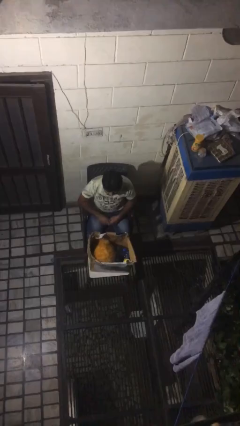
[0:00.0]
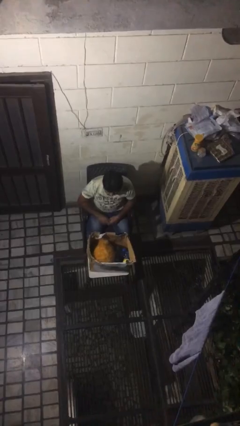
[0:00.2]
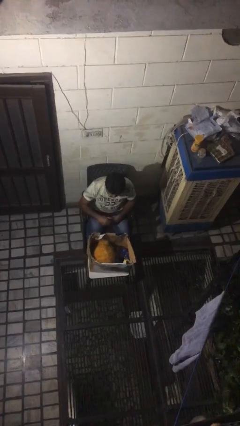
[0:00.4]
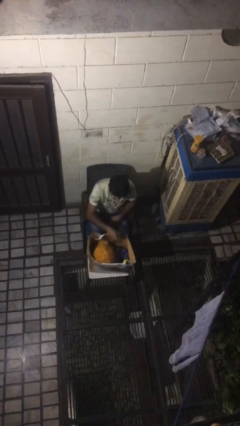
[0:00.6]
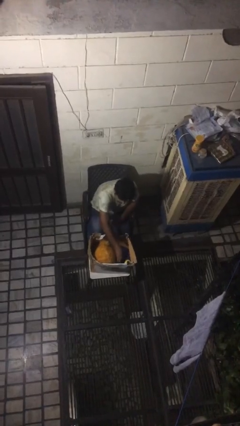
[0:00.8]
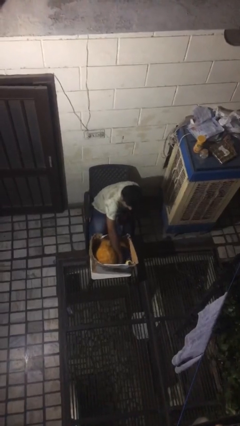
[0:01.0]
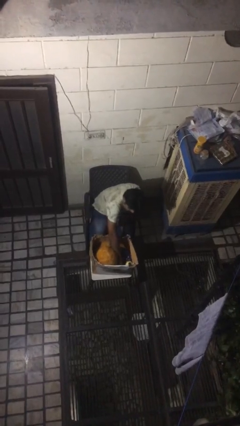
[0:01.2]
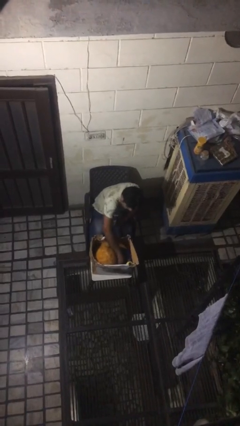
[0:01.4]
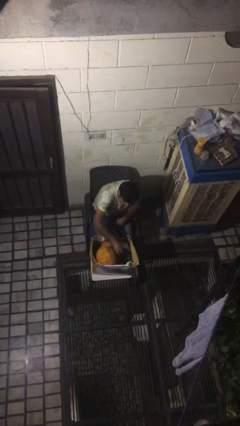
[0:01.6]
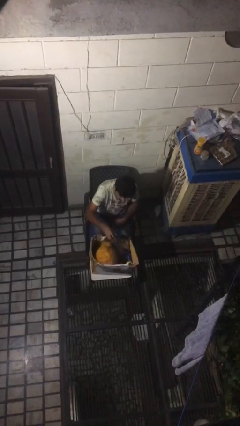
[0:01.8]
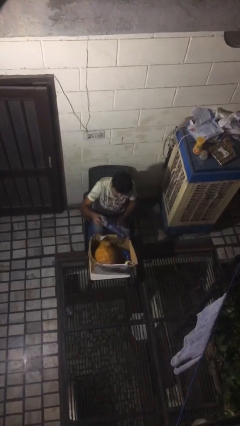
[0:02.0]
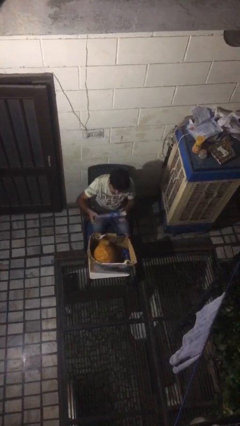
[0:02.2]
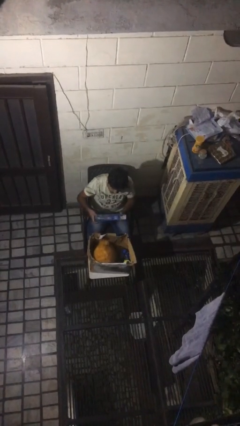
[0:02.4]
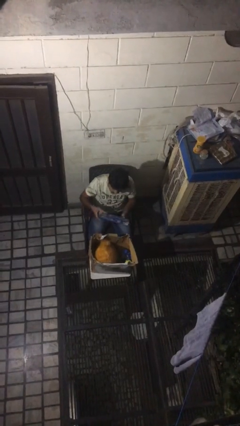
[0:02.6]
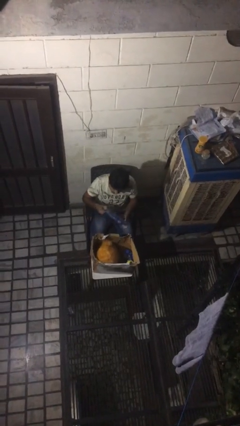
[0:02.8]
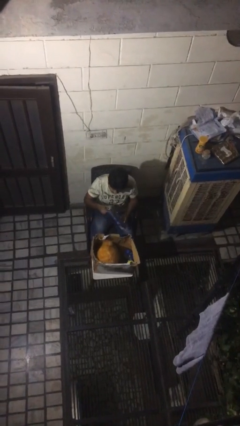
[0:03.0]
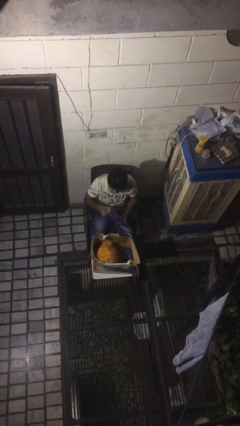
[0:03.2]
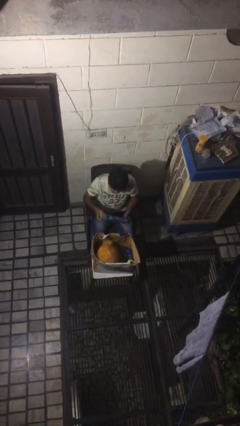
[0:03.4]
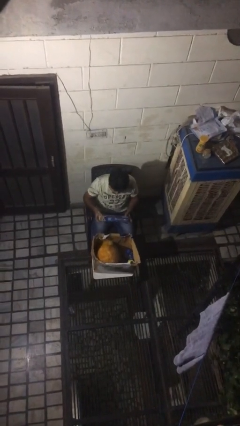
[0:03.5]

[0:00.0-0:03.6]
person takes object from box

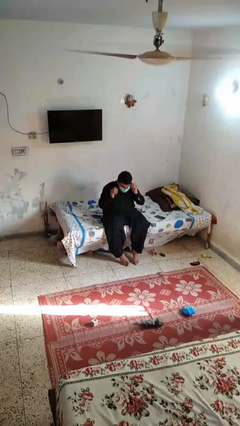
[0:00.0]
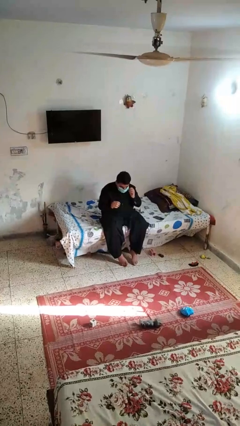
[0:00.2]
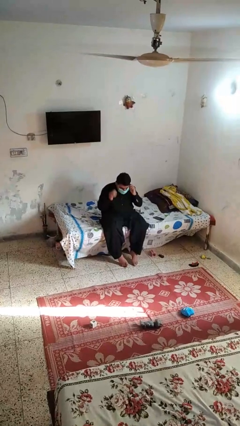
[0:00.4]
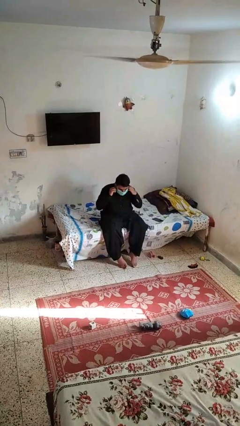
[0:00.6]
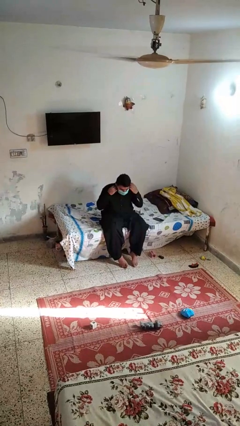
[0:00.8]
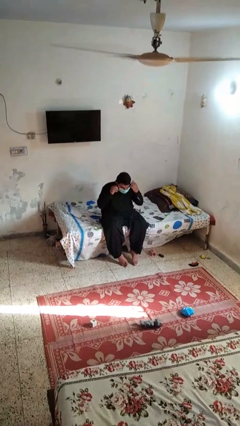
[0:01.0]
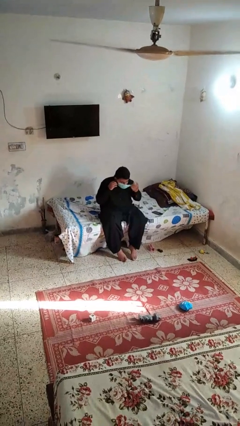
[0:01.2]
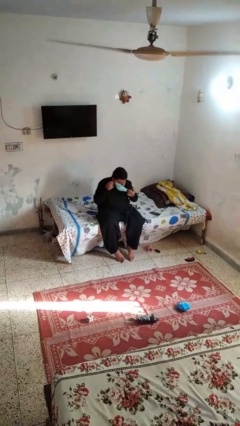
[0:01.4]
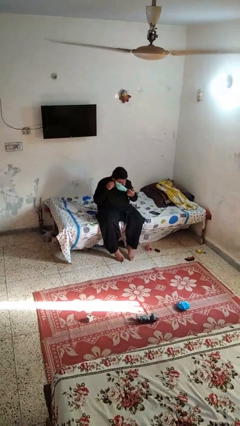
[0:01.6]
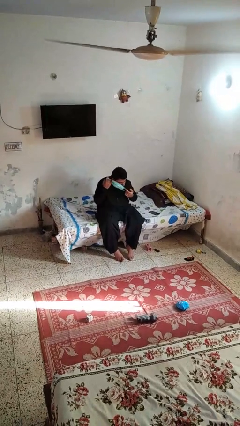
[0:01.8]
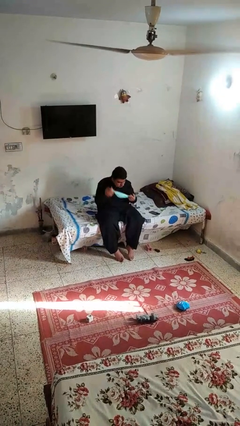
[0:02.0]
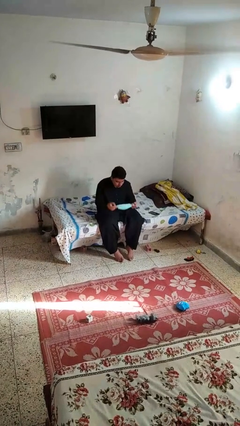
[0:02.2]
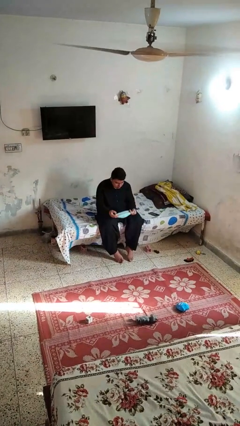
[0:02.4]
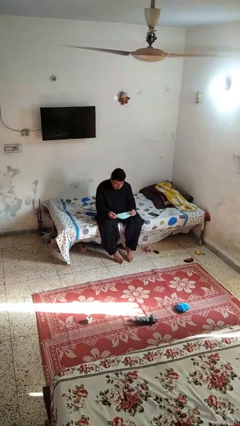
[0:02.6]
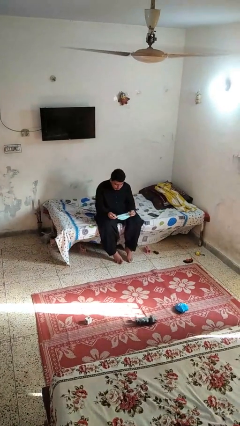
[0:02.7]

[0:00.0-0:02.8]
person takes off facemask

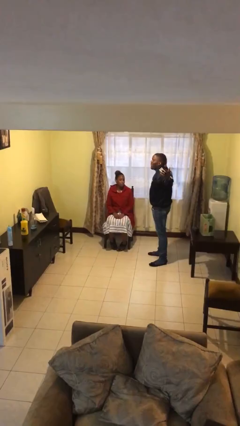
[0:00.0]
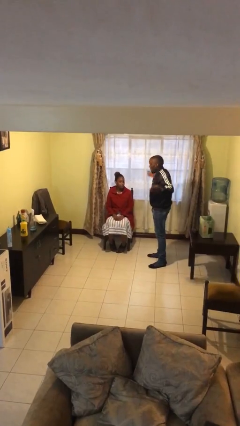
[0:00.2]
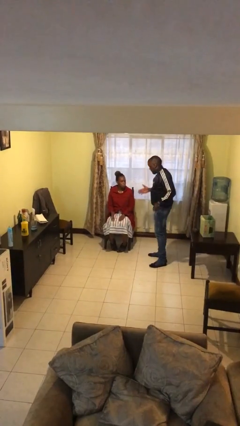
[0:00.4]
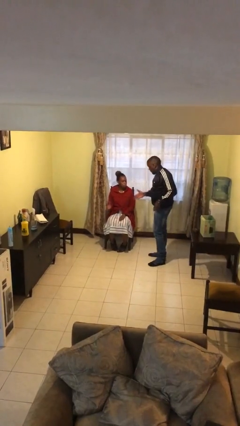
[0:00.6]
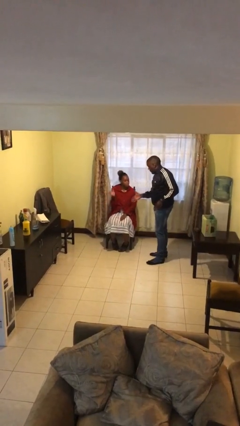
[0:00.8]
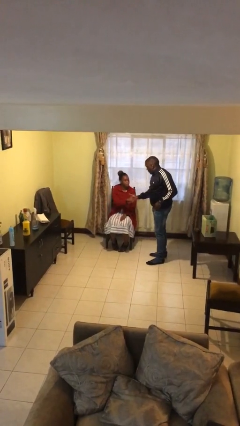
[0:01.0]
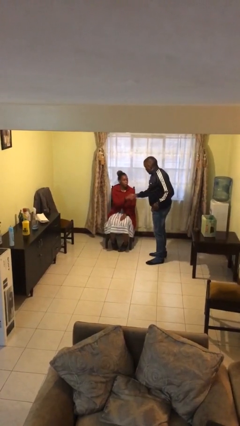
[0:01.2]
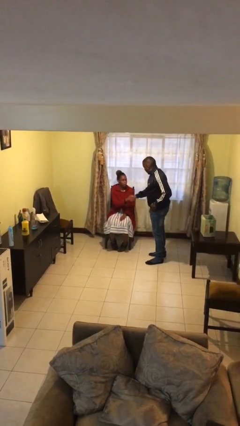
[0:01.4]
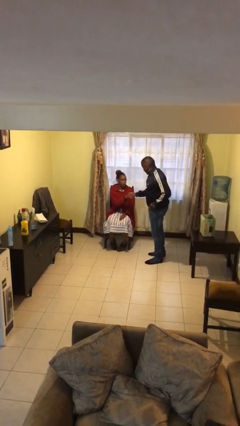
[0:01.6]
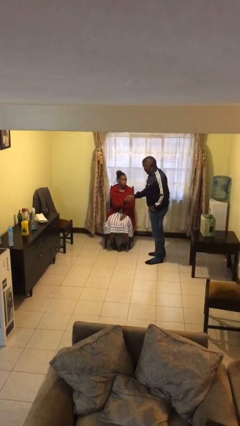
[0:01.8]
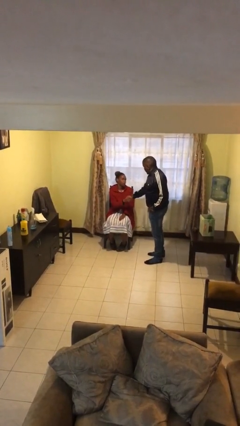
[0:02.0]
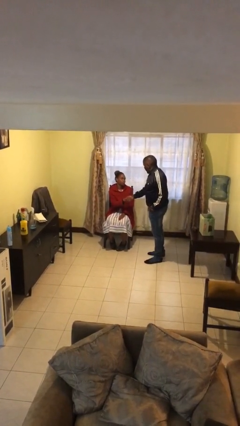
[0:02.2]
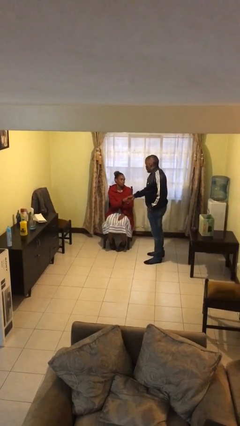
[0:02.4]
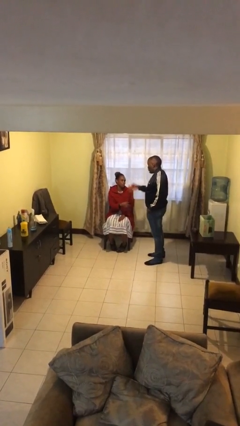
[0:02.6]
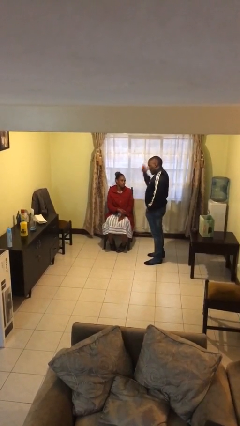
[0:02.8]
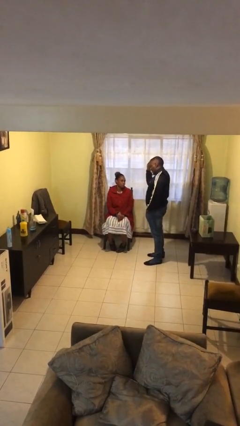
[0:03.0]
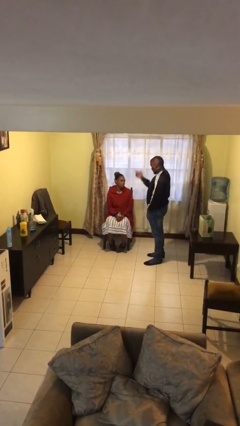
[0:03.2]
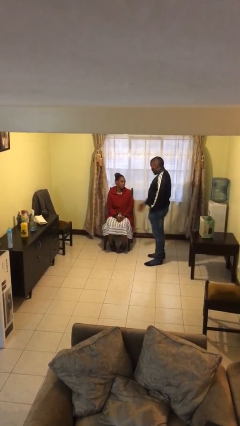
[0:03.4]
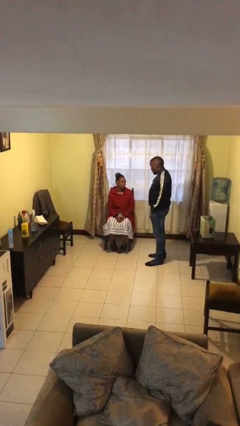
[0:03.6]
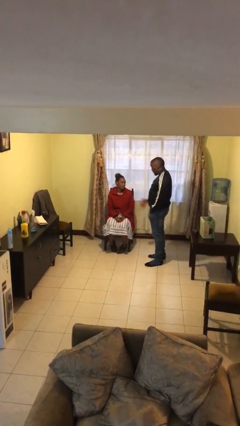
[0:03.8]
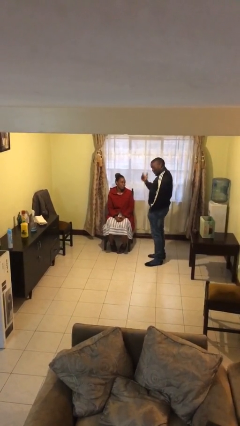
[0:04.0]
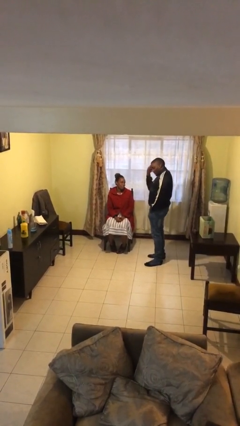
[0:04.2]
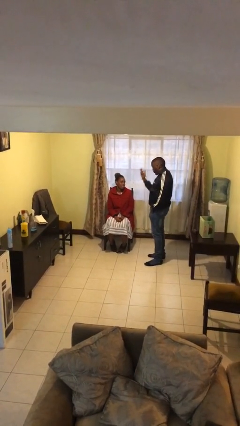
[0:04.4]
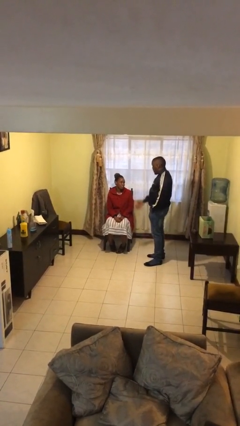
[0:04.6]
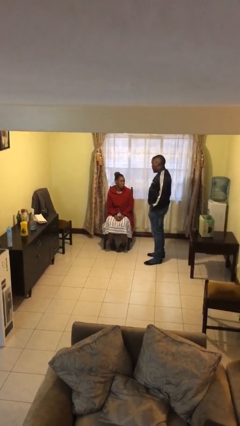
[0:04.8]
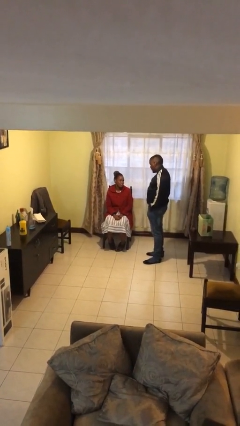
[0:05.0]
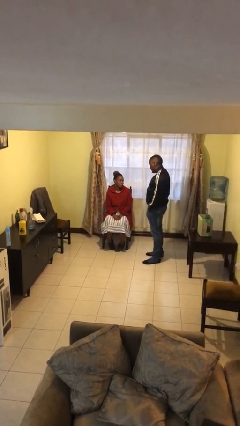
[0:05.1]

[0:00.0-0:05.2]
person shakes hand

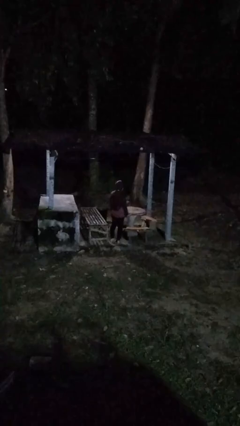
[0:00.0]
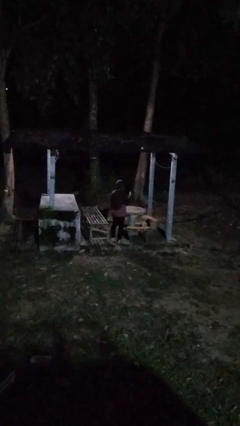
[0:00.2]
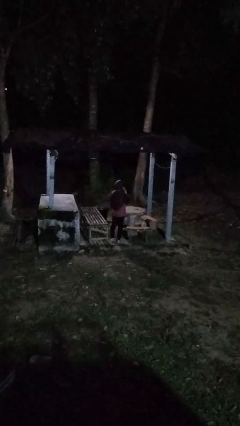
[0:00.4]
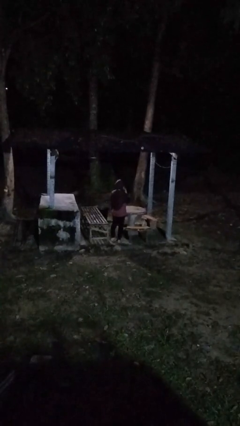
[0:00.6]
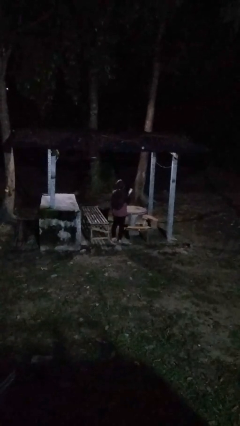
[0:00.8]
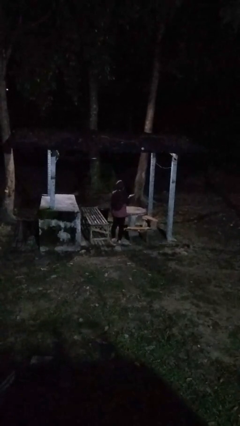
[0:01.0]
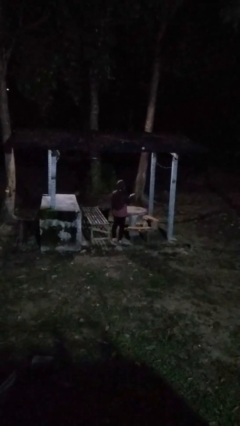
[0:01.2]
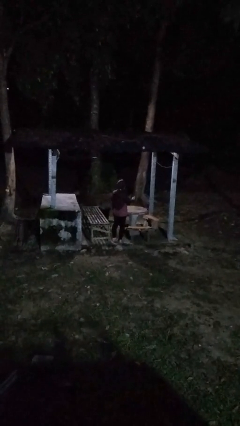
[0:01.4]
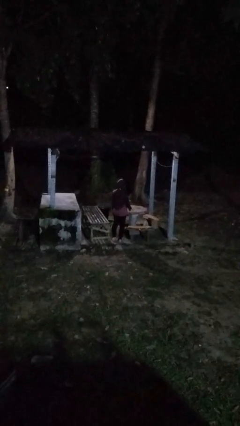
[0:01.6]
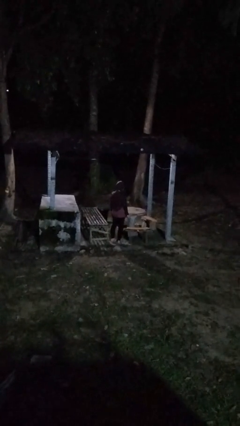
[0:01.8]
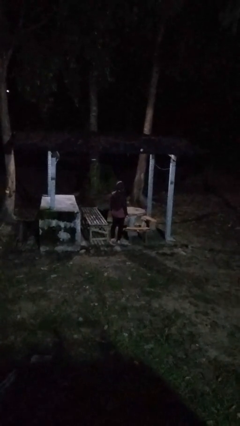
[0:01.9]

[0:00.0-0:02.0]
person gestures blow kiss

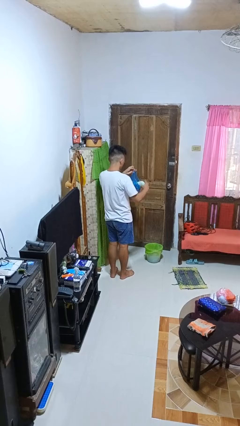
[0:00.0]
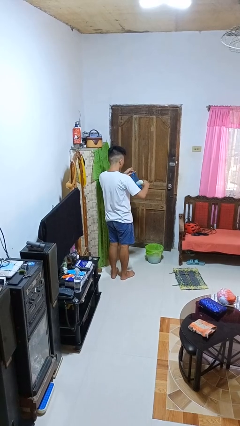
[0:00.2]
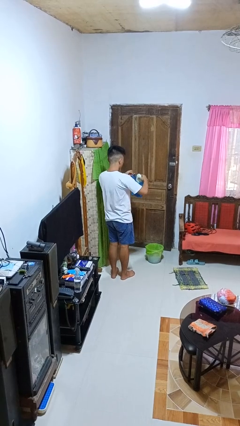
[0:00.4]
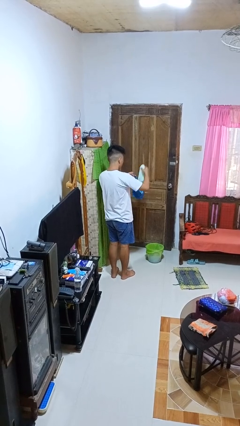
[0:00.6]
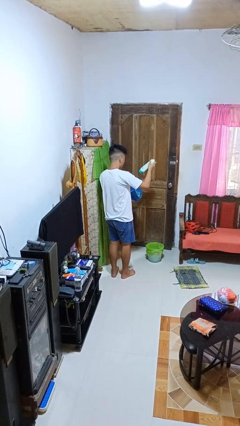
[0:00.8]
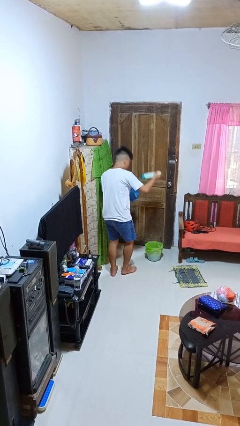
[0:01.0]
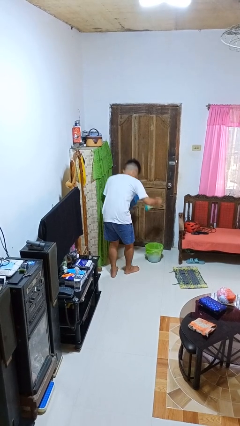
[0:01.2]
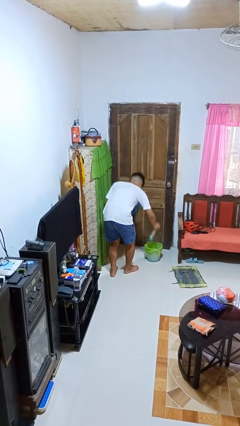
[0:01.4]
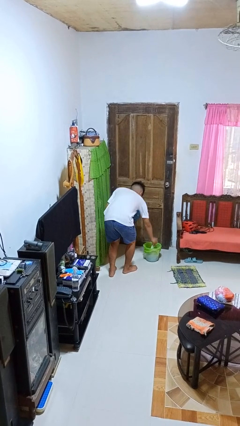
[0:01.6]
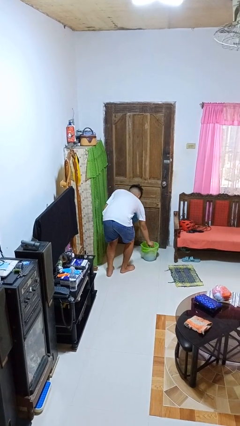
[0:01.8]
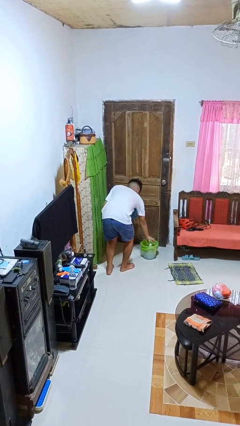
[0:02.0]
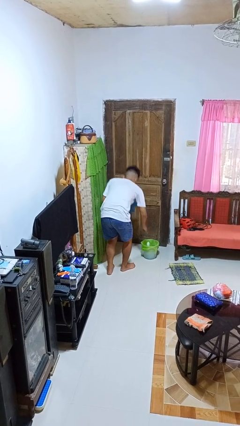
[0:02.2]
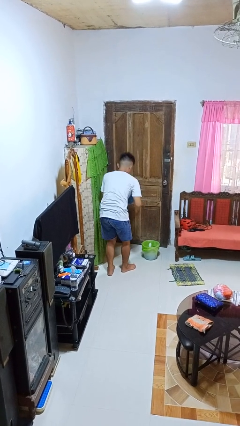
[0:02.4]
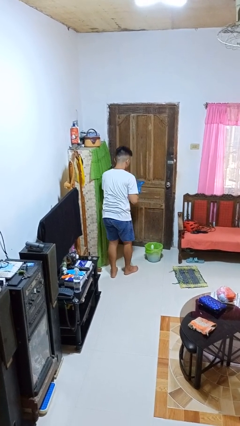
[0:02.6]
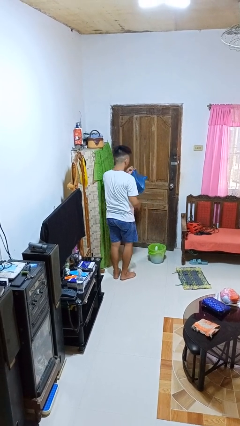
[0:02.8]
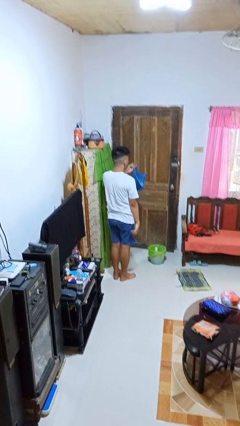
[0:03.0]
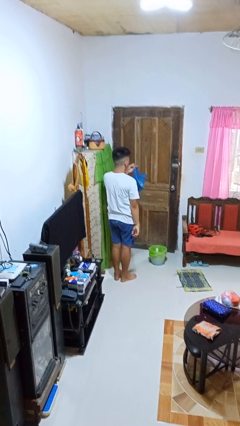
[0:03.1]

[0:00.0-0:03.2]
person discards trash

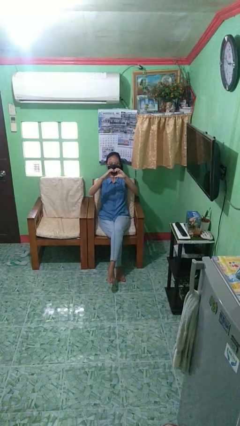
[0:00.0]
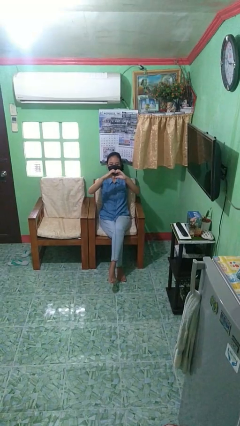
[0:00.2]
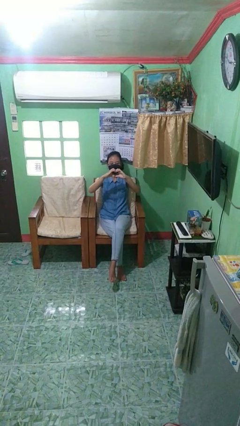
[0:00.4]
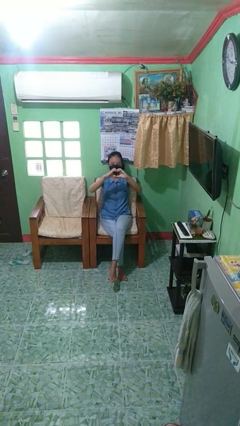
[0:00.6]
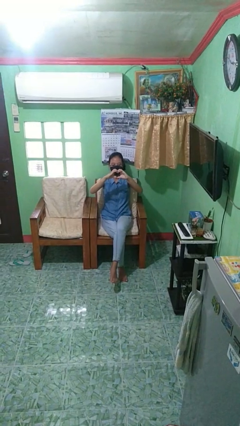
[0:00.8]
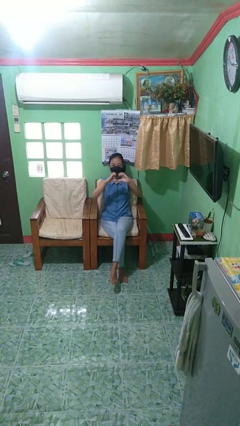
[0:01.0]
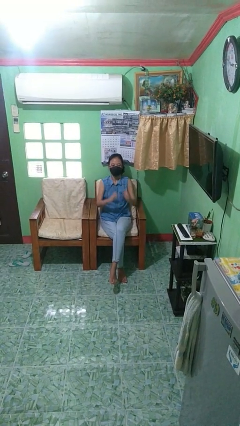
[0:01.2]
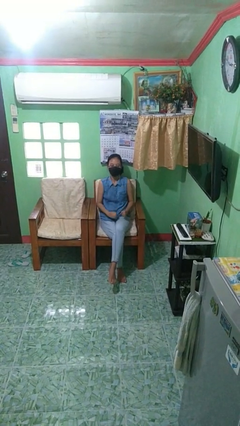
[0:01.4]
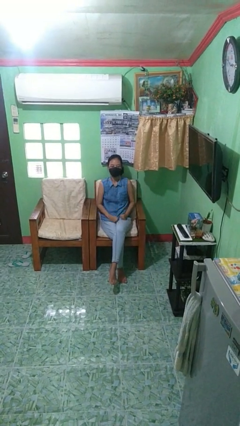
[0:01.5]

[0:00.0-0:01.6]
person gestures heart
